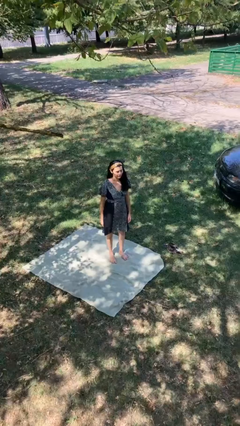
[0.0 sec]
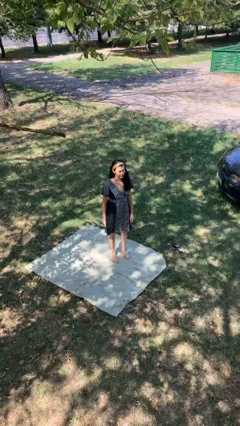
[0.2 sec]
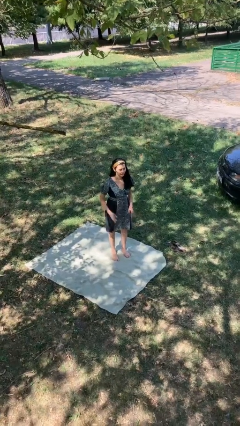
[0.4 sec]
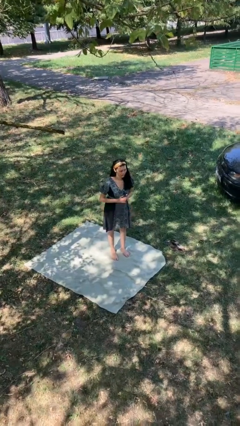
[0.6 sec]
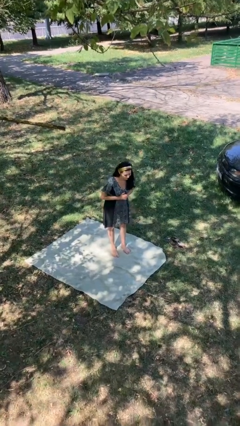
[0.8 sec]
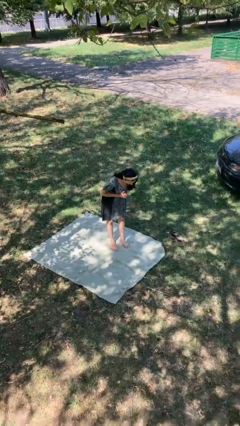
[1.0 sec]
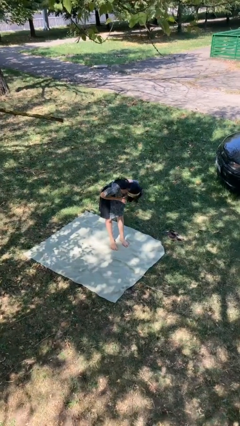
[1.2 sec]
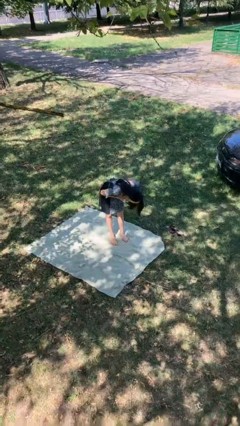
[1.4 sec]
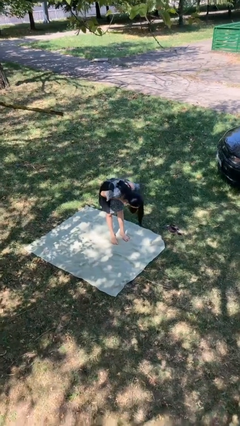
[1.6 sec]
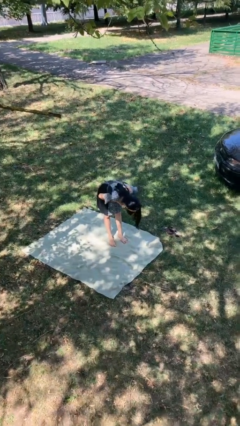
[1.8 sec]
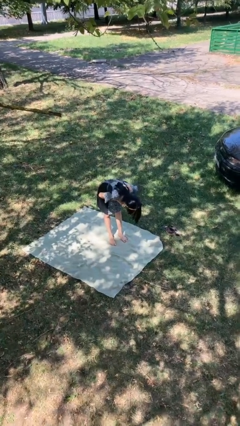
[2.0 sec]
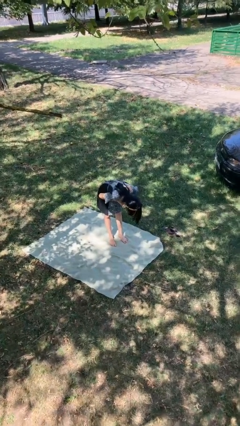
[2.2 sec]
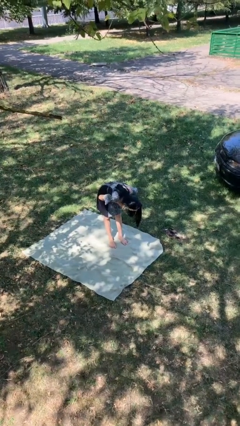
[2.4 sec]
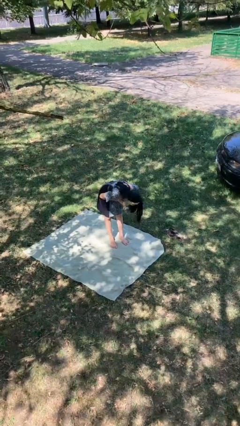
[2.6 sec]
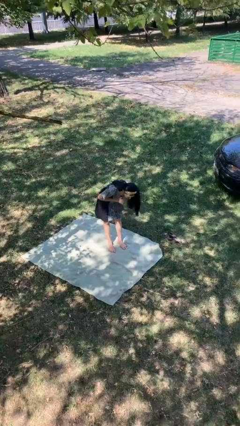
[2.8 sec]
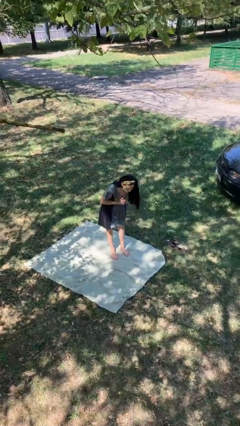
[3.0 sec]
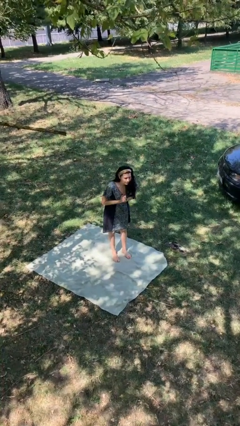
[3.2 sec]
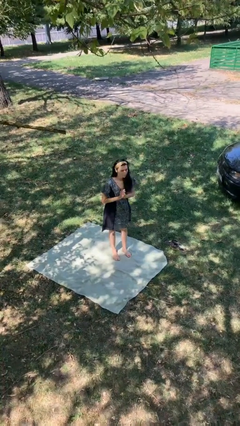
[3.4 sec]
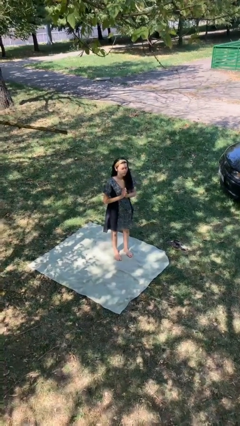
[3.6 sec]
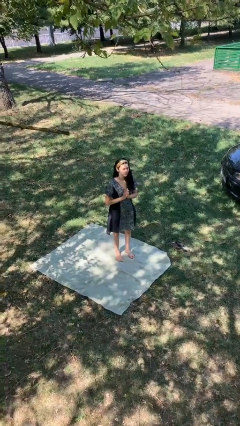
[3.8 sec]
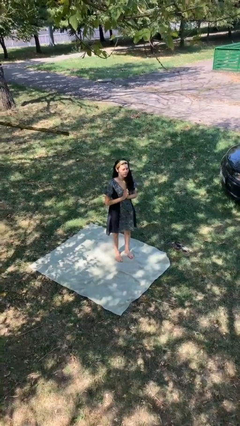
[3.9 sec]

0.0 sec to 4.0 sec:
person bows

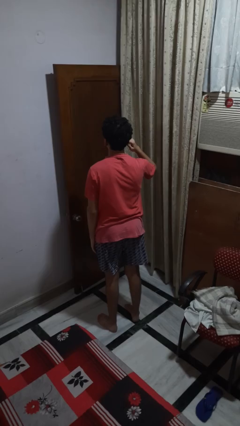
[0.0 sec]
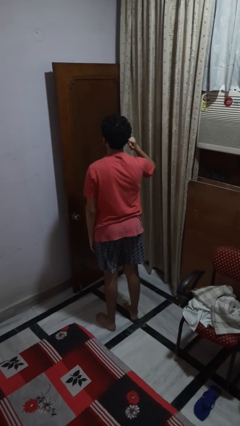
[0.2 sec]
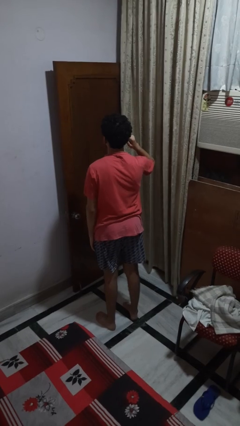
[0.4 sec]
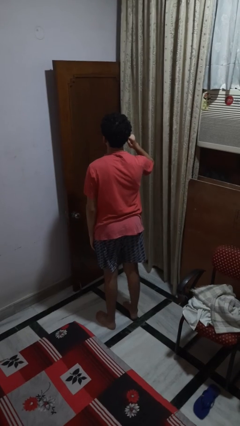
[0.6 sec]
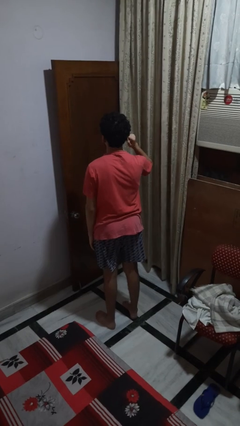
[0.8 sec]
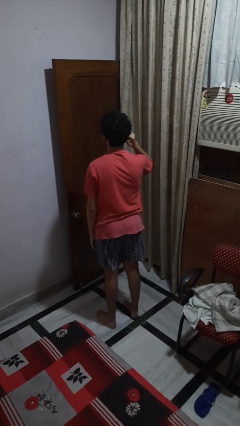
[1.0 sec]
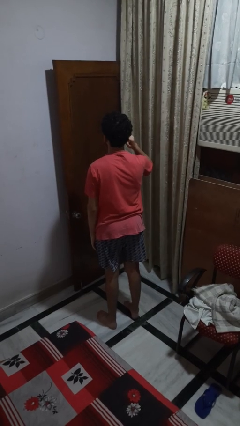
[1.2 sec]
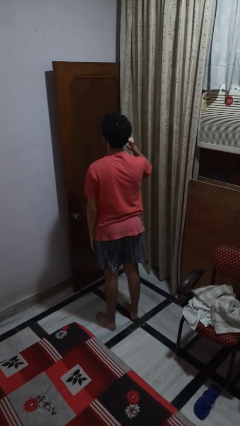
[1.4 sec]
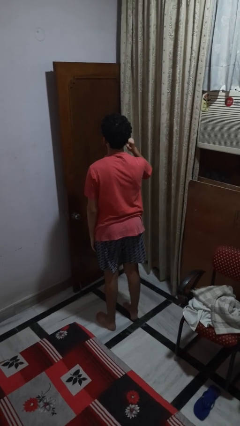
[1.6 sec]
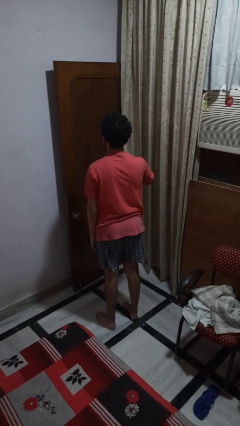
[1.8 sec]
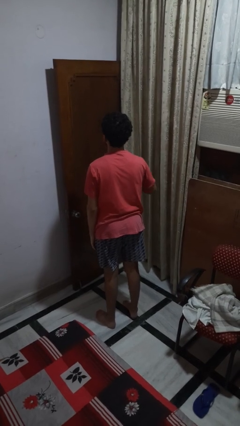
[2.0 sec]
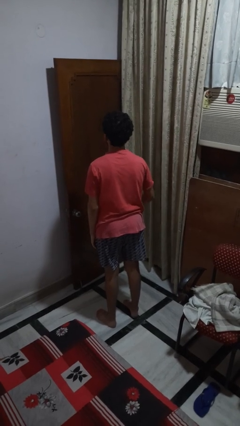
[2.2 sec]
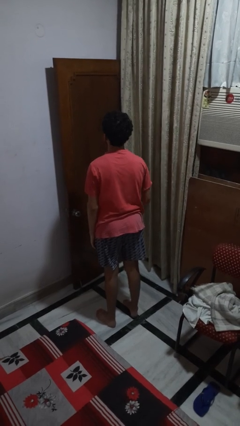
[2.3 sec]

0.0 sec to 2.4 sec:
person touches earlobe

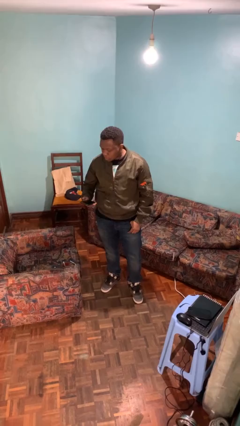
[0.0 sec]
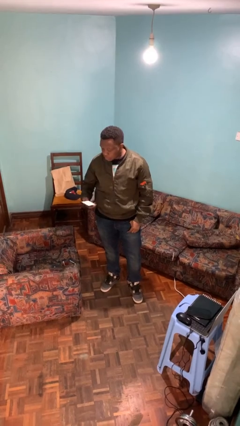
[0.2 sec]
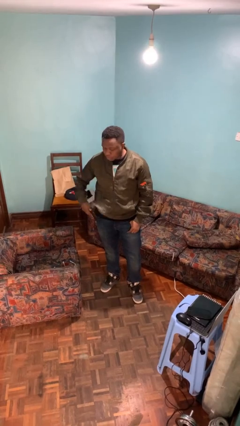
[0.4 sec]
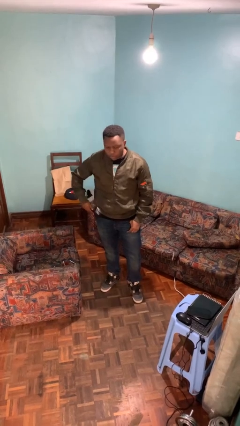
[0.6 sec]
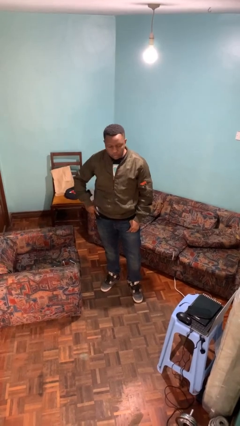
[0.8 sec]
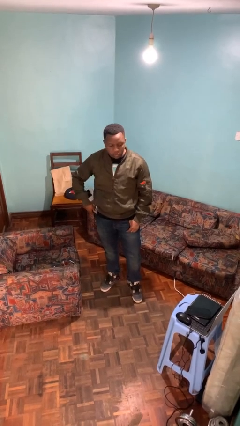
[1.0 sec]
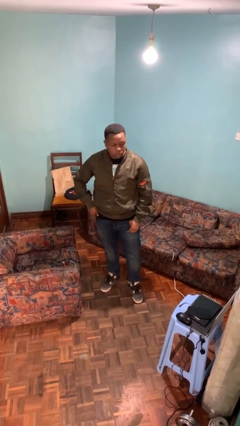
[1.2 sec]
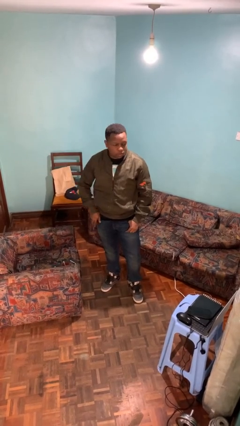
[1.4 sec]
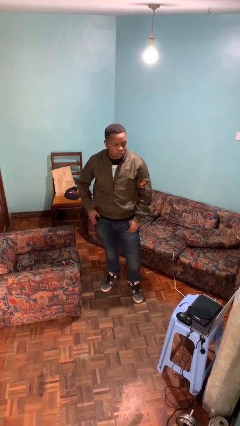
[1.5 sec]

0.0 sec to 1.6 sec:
person puts phone into pocket

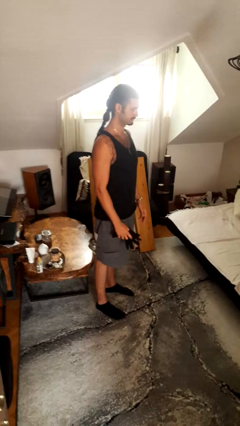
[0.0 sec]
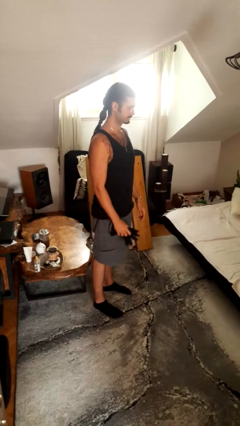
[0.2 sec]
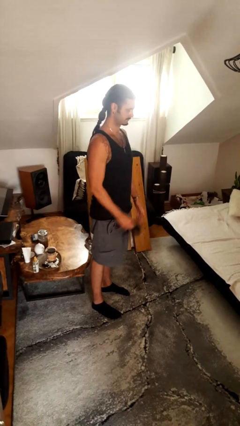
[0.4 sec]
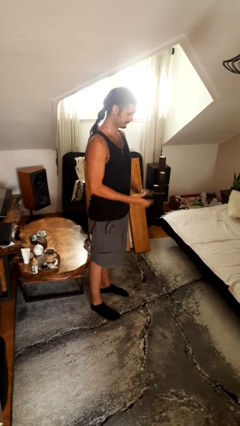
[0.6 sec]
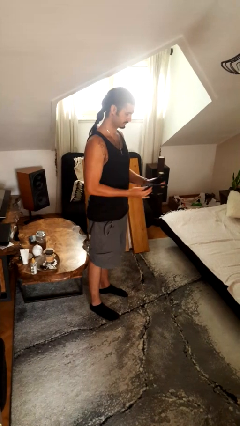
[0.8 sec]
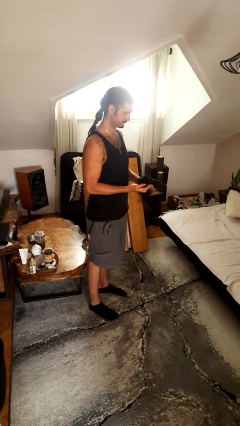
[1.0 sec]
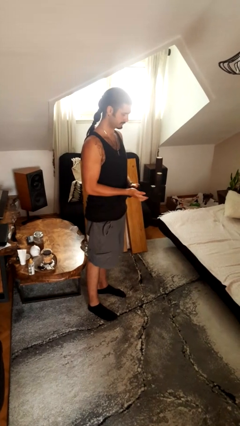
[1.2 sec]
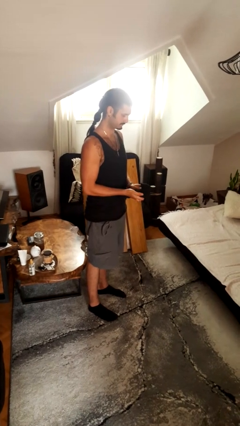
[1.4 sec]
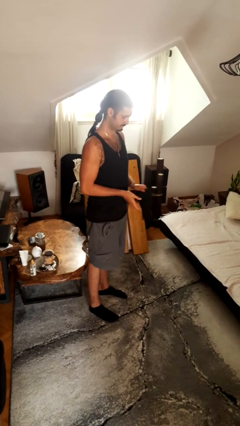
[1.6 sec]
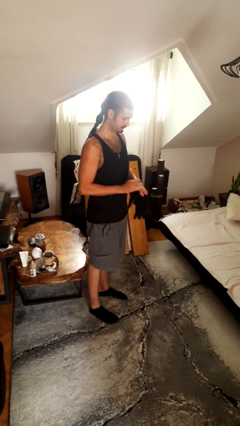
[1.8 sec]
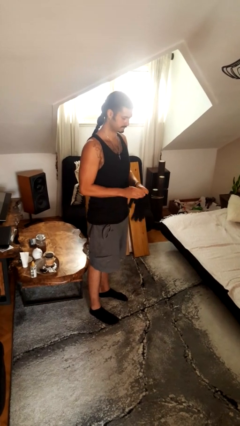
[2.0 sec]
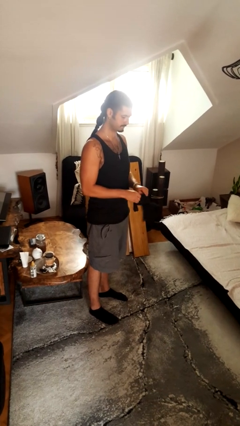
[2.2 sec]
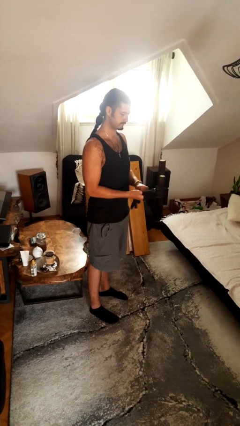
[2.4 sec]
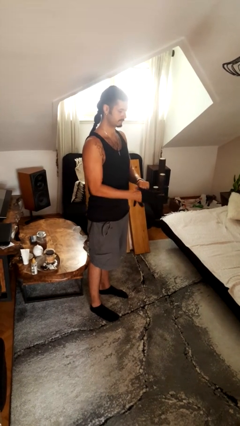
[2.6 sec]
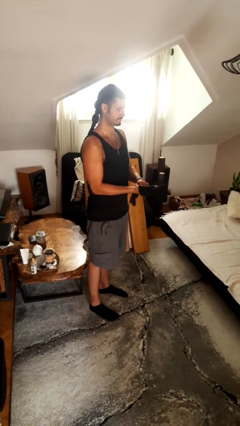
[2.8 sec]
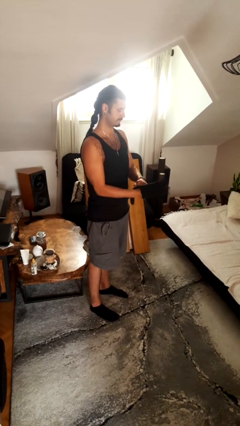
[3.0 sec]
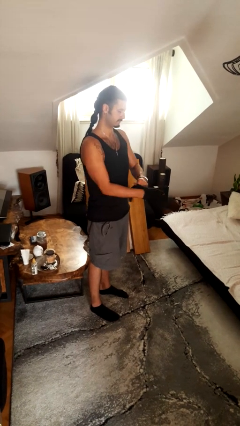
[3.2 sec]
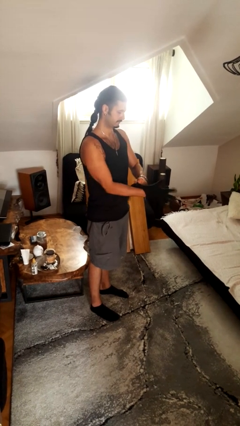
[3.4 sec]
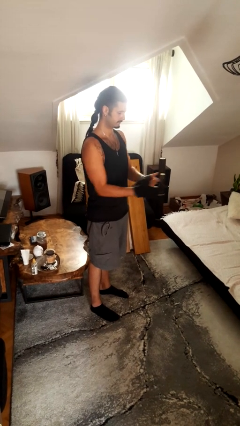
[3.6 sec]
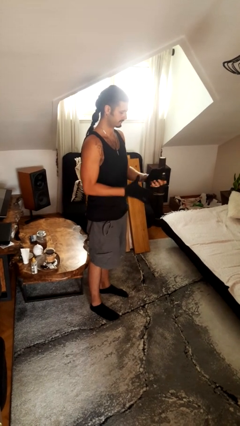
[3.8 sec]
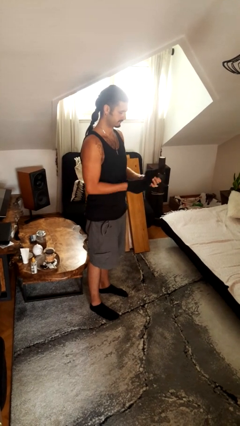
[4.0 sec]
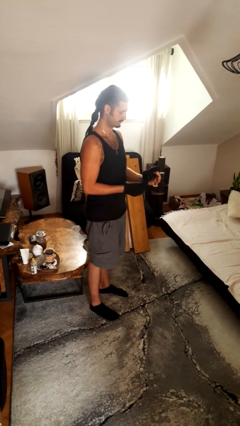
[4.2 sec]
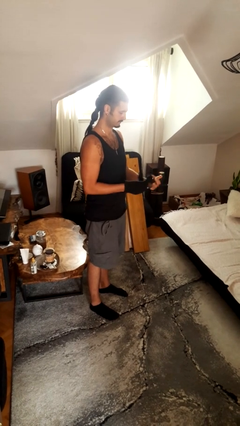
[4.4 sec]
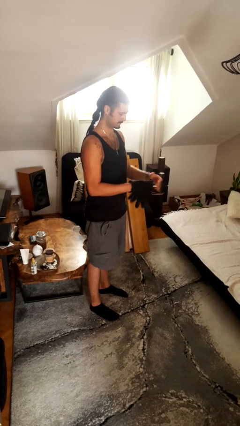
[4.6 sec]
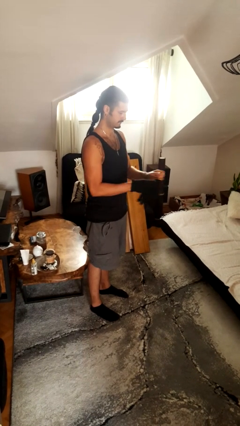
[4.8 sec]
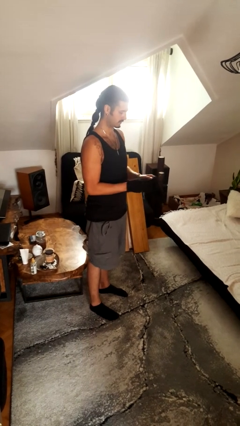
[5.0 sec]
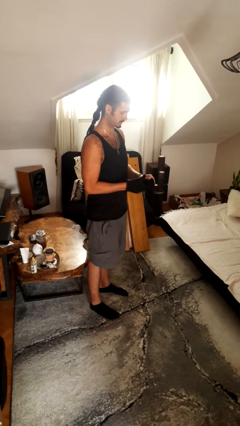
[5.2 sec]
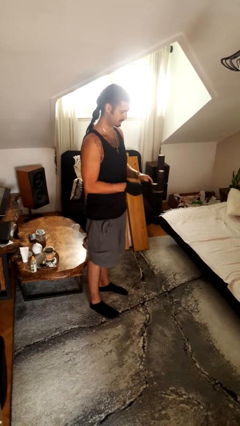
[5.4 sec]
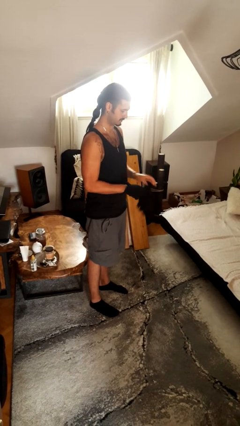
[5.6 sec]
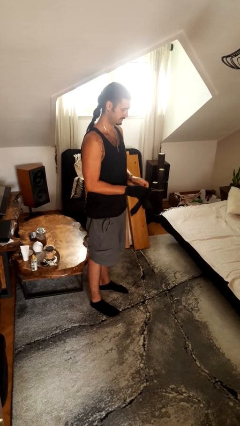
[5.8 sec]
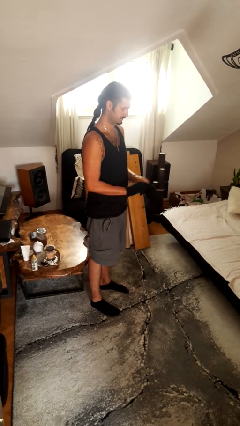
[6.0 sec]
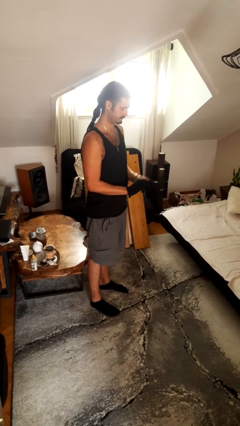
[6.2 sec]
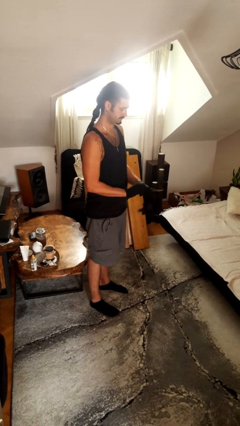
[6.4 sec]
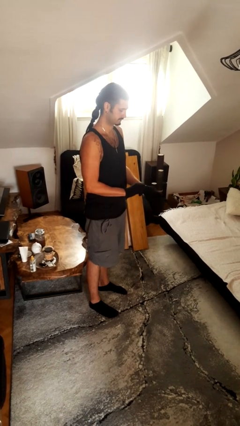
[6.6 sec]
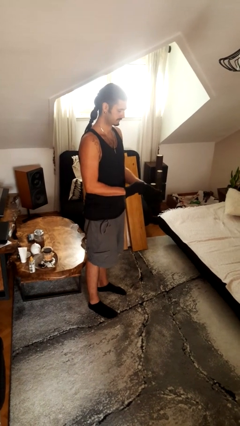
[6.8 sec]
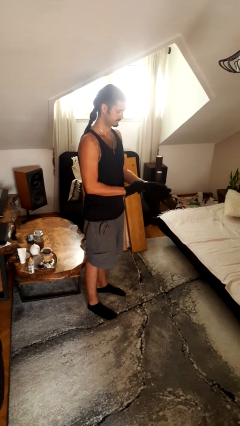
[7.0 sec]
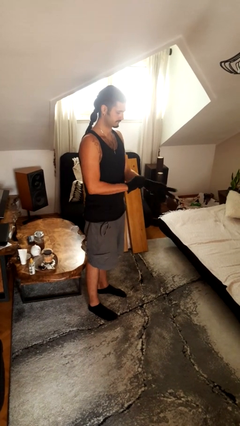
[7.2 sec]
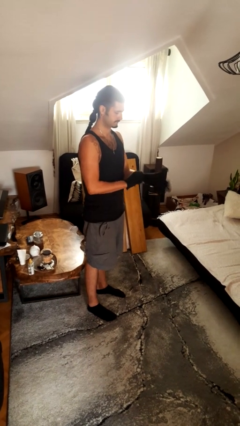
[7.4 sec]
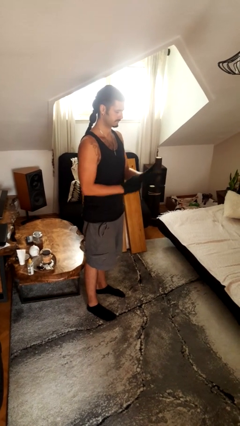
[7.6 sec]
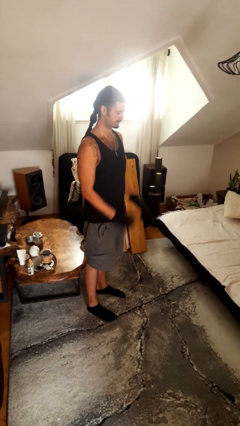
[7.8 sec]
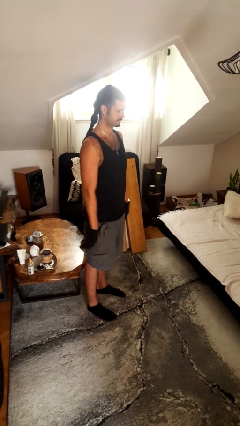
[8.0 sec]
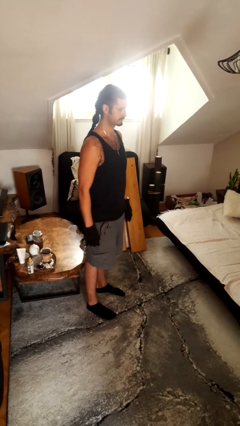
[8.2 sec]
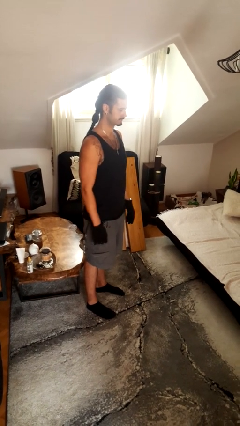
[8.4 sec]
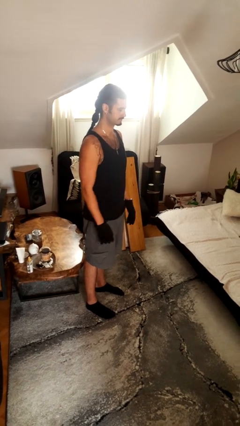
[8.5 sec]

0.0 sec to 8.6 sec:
person puts on gloves

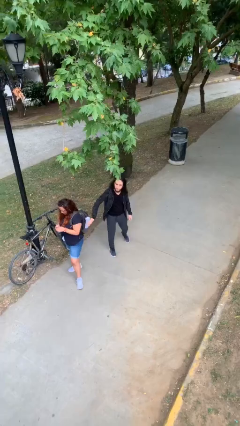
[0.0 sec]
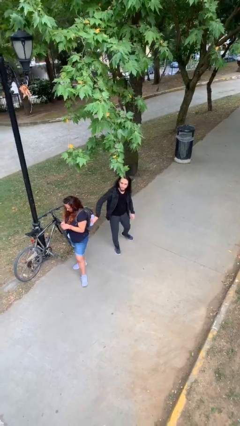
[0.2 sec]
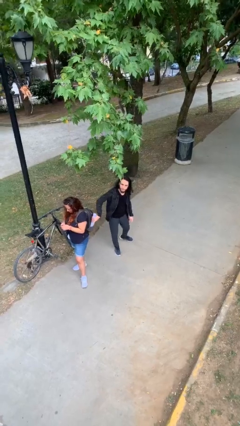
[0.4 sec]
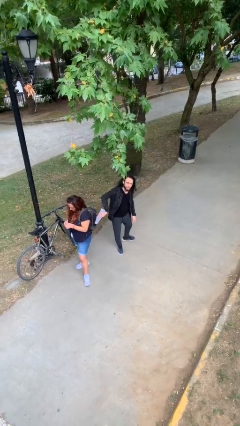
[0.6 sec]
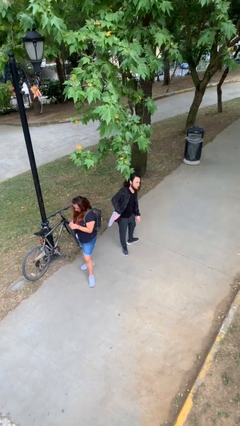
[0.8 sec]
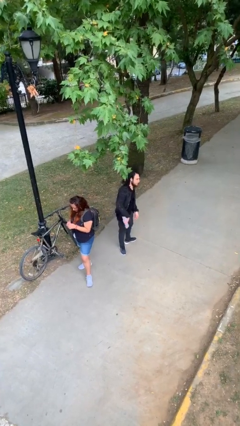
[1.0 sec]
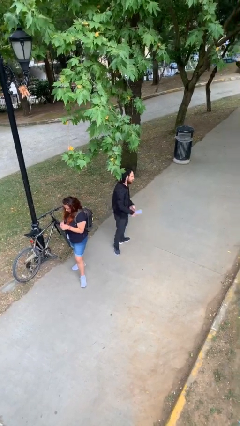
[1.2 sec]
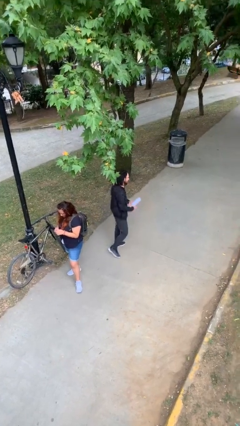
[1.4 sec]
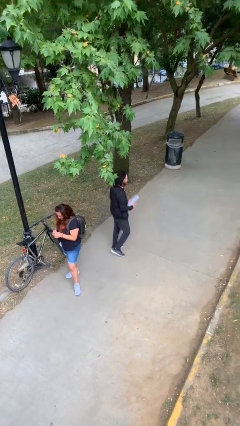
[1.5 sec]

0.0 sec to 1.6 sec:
person steals object from person
